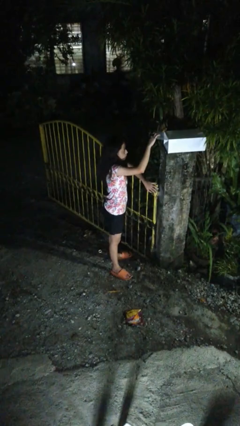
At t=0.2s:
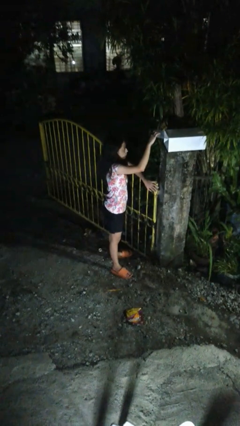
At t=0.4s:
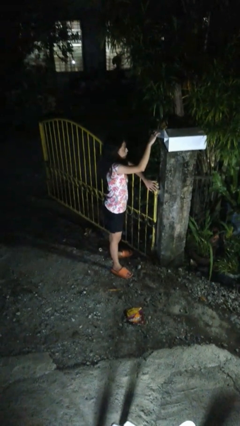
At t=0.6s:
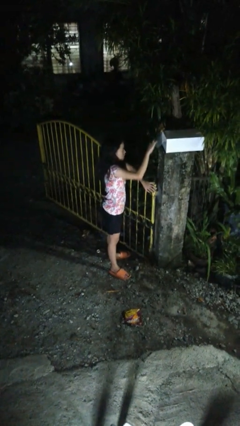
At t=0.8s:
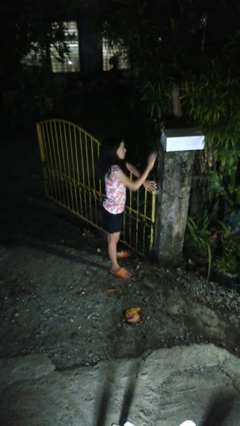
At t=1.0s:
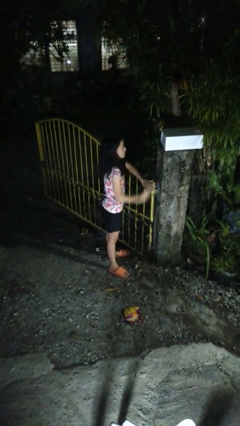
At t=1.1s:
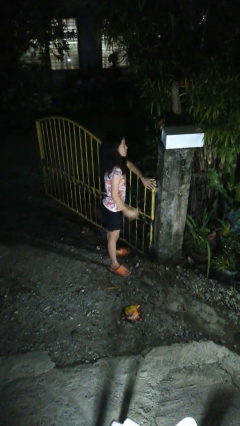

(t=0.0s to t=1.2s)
person closes mailbox

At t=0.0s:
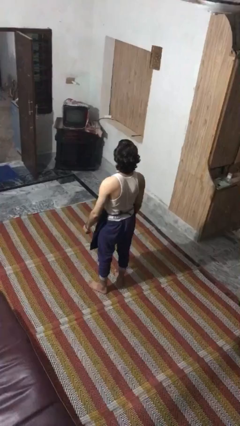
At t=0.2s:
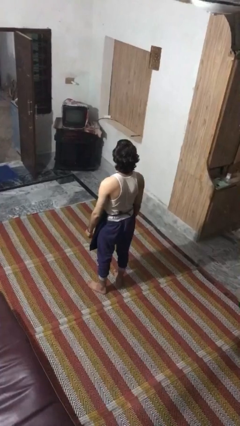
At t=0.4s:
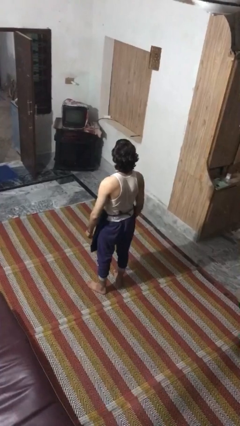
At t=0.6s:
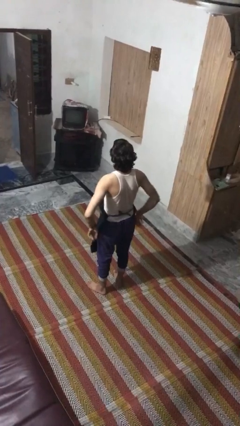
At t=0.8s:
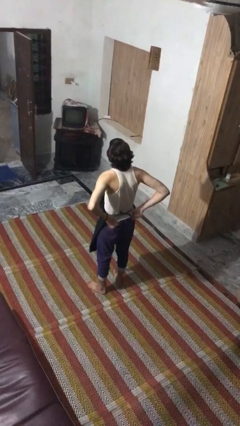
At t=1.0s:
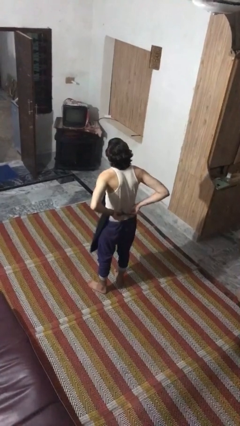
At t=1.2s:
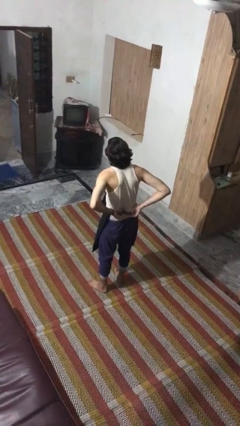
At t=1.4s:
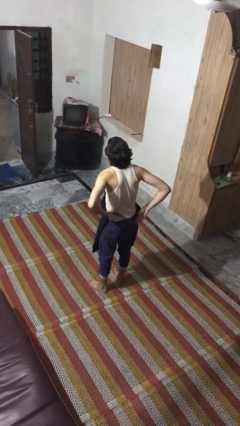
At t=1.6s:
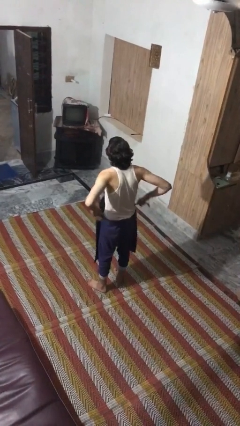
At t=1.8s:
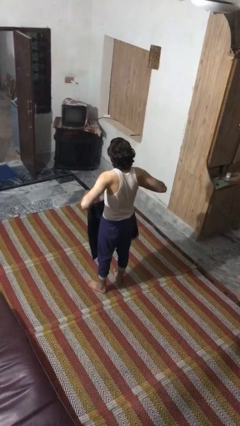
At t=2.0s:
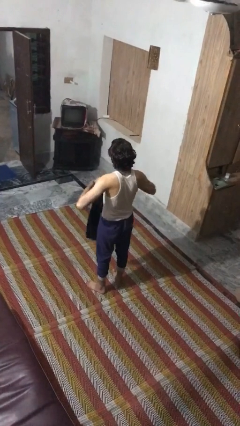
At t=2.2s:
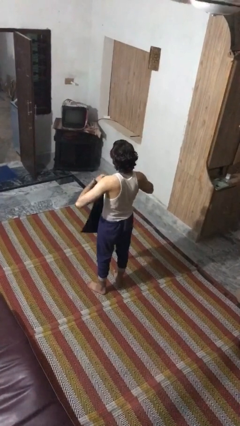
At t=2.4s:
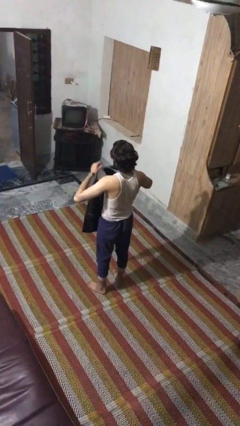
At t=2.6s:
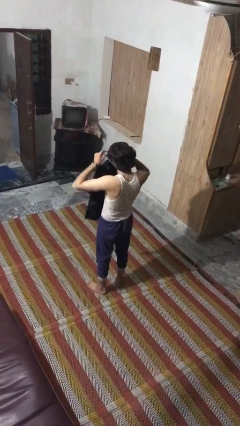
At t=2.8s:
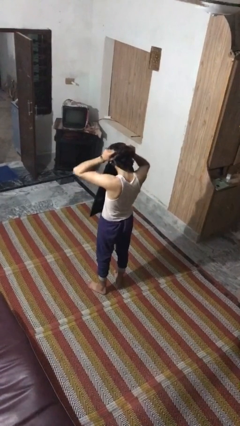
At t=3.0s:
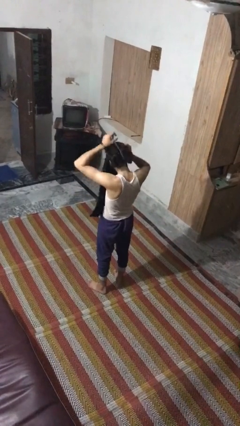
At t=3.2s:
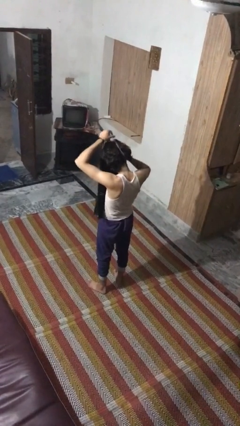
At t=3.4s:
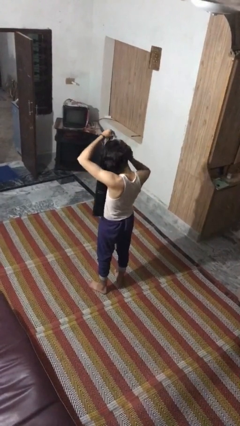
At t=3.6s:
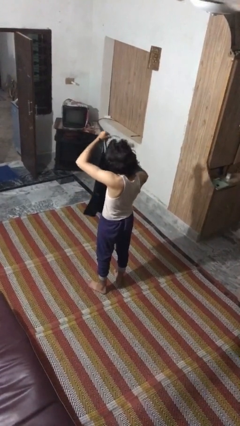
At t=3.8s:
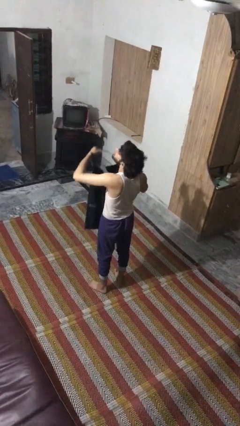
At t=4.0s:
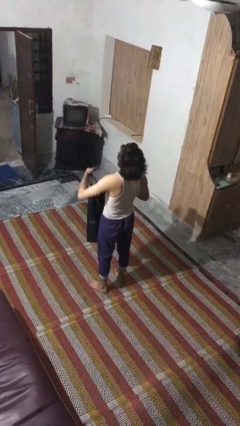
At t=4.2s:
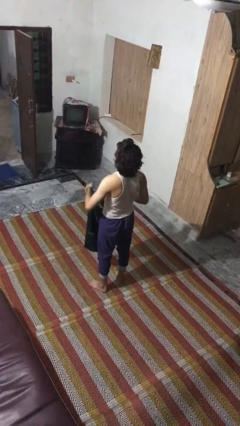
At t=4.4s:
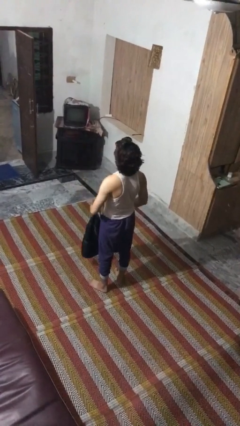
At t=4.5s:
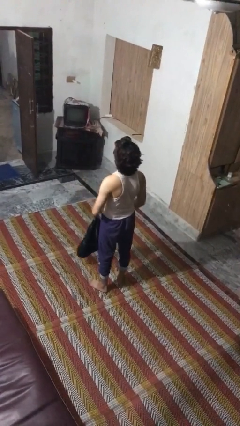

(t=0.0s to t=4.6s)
person takes off apron

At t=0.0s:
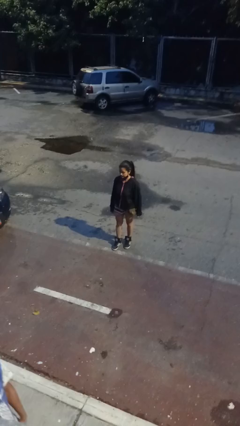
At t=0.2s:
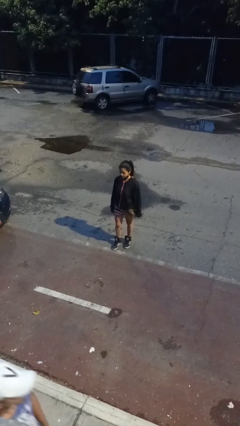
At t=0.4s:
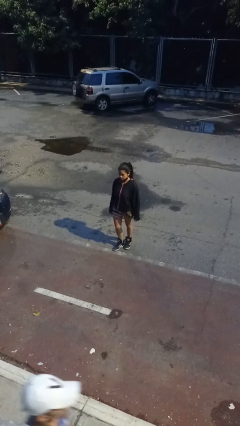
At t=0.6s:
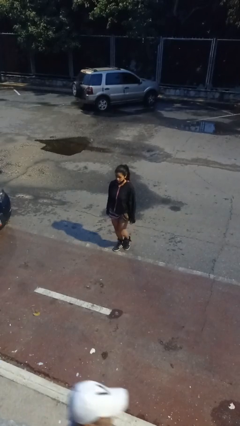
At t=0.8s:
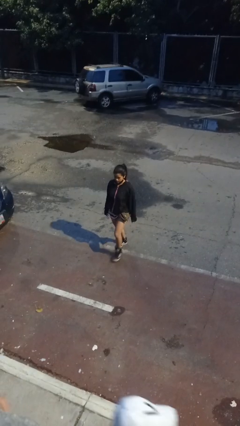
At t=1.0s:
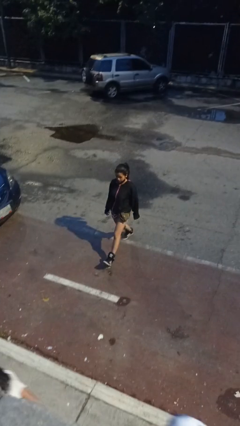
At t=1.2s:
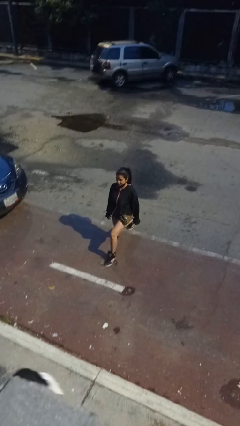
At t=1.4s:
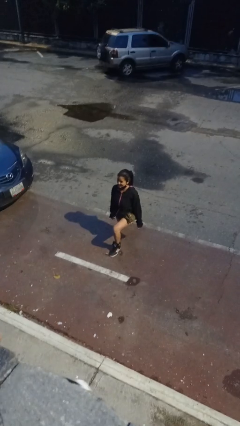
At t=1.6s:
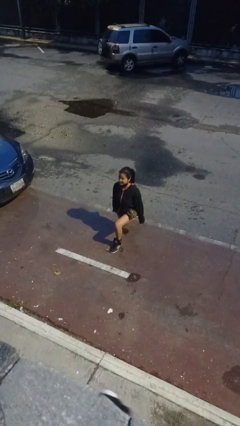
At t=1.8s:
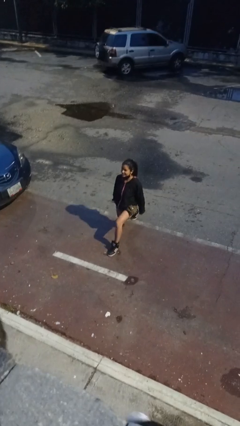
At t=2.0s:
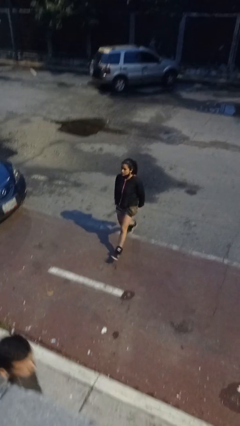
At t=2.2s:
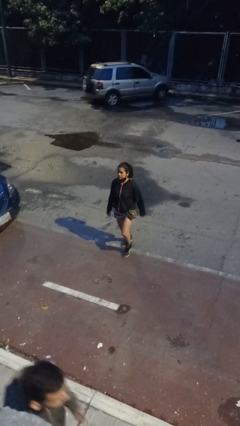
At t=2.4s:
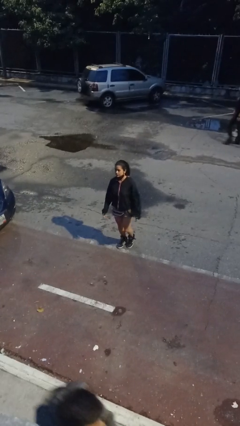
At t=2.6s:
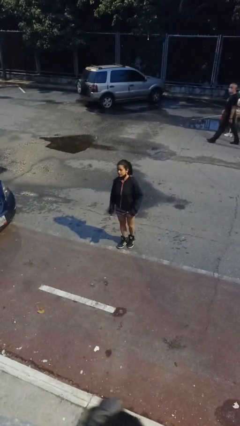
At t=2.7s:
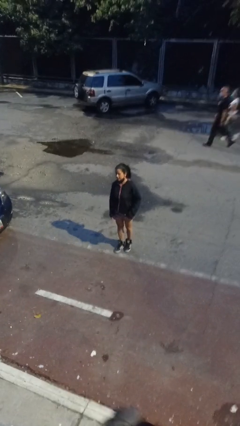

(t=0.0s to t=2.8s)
person exercises with lunges

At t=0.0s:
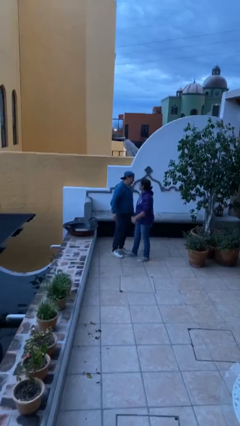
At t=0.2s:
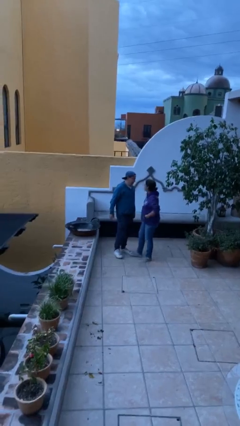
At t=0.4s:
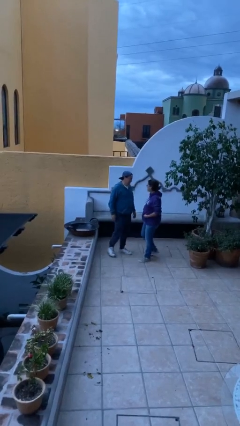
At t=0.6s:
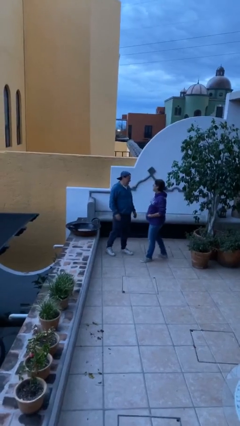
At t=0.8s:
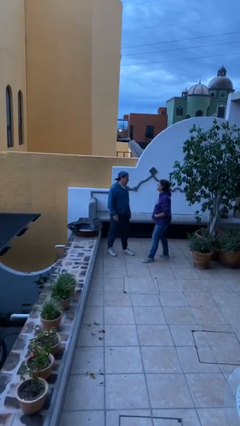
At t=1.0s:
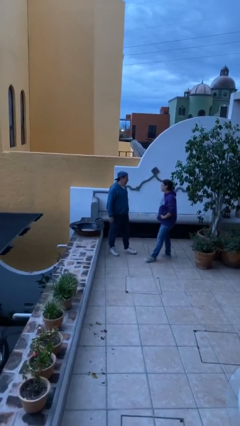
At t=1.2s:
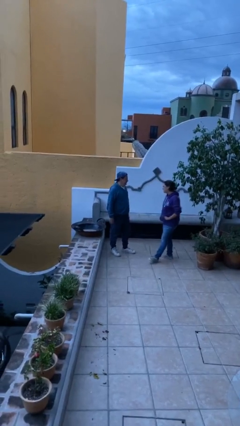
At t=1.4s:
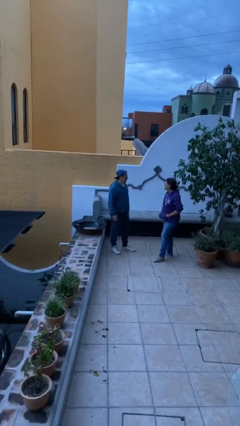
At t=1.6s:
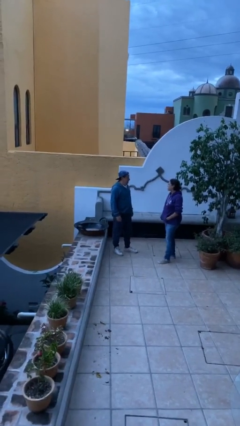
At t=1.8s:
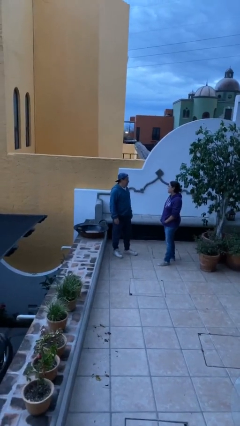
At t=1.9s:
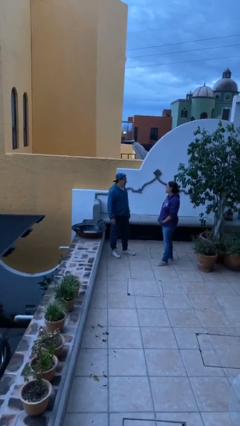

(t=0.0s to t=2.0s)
person talks to person

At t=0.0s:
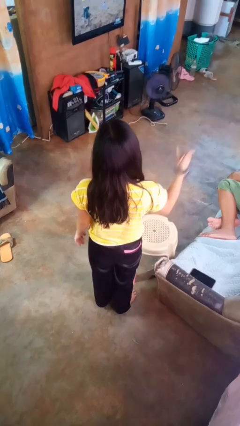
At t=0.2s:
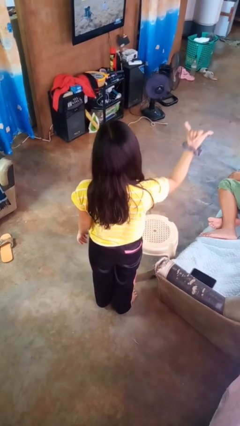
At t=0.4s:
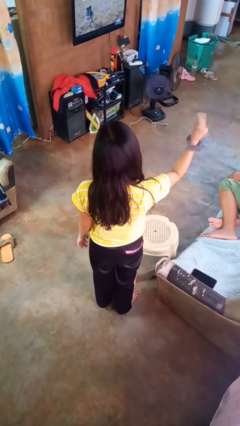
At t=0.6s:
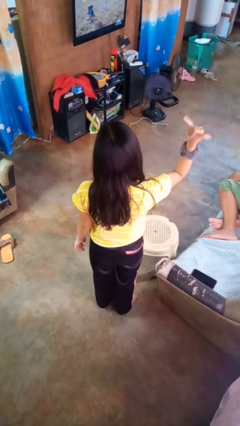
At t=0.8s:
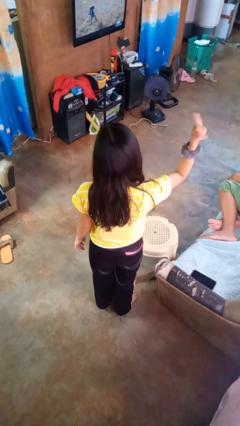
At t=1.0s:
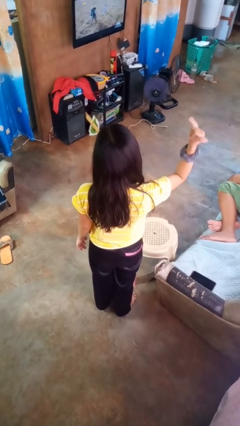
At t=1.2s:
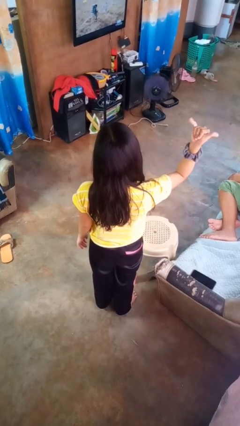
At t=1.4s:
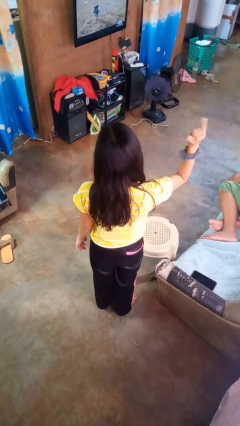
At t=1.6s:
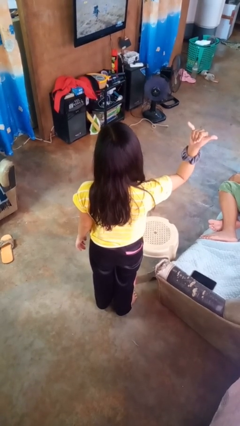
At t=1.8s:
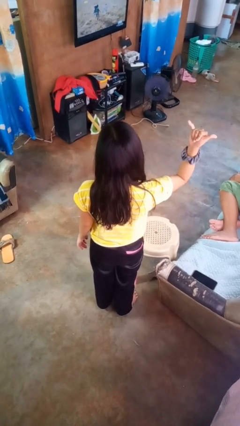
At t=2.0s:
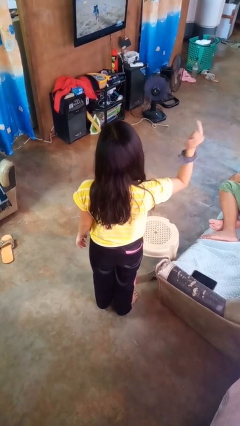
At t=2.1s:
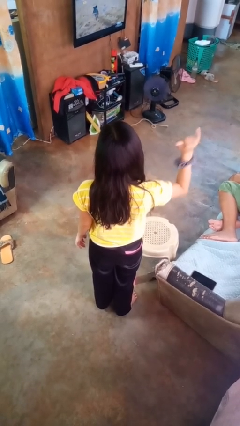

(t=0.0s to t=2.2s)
person gestures hang loose

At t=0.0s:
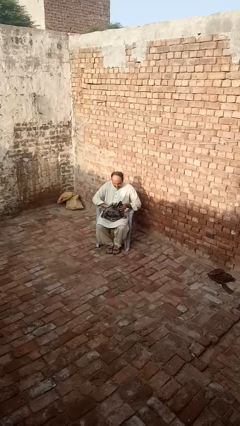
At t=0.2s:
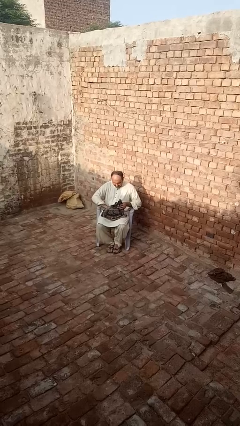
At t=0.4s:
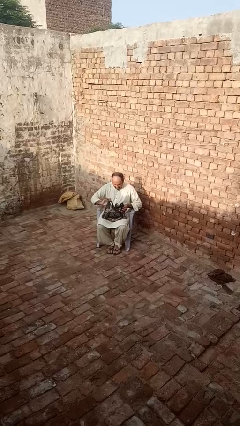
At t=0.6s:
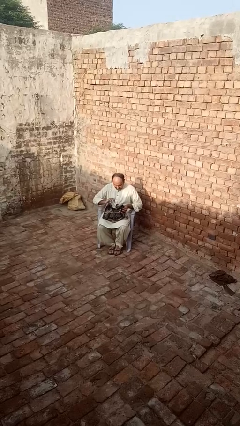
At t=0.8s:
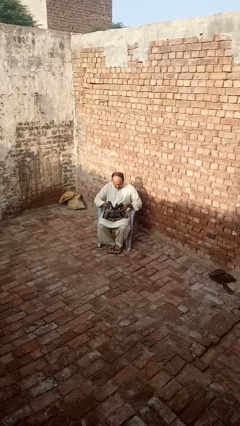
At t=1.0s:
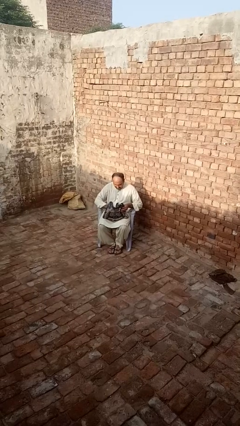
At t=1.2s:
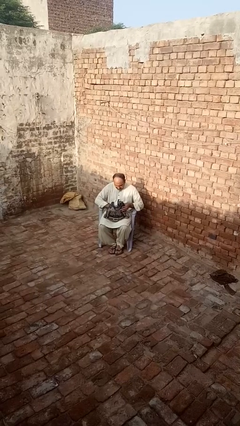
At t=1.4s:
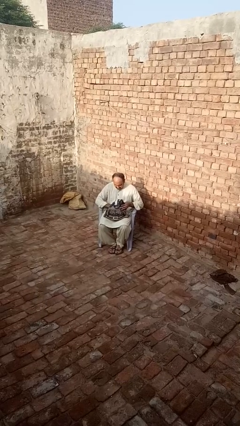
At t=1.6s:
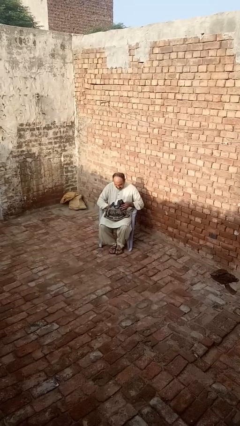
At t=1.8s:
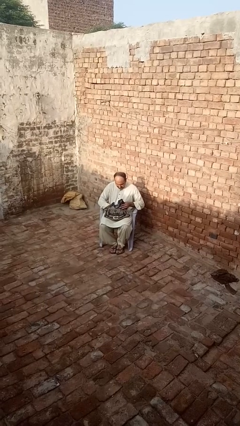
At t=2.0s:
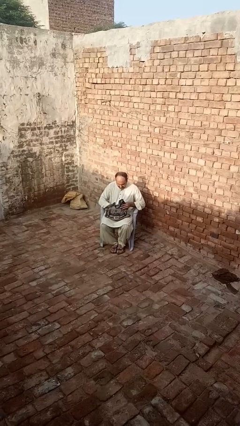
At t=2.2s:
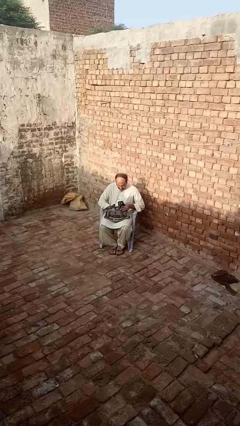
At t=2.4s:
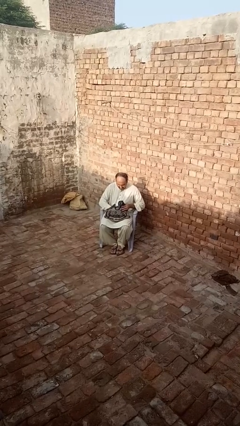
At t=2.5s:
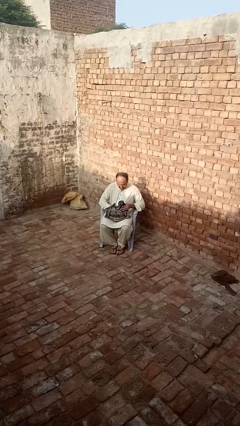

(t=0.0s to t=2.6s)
person searches in purse

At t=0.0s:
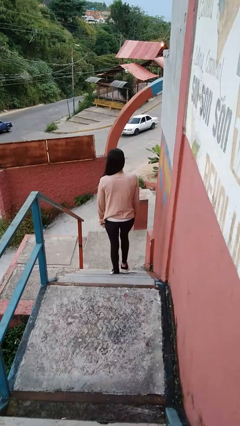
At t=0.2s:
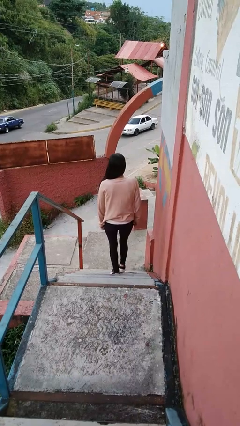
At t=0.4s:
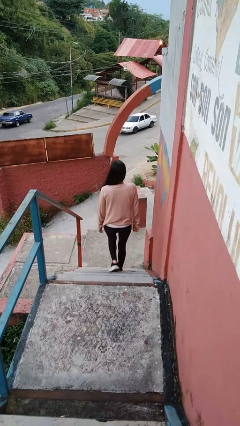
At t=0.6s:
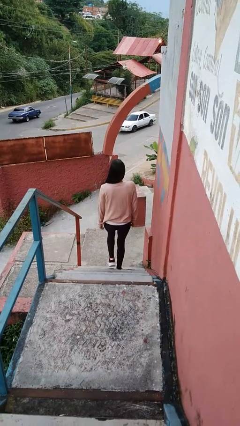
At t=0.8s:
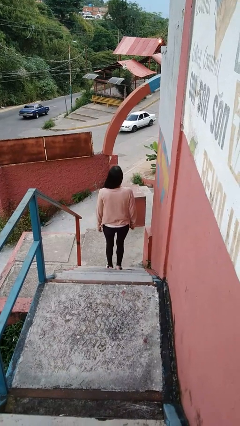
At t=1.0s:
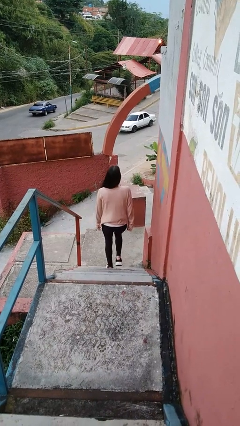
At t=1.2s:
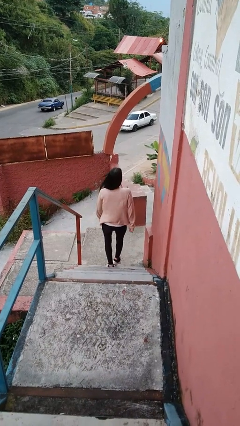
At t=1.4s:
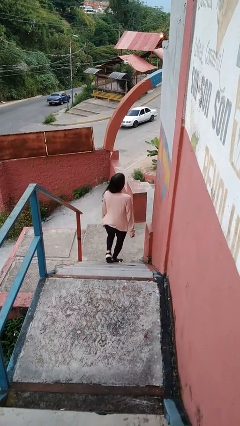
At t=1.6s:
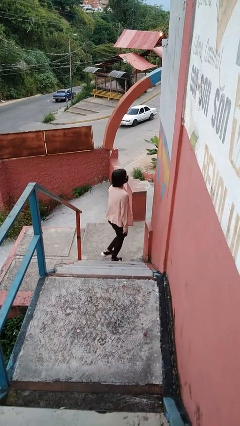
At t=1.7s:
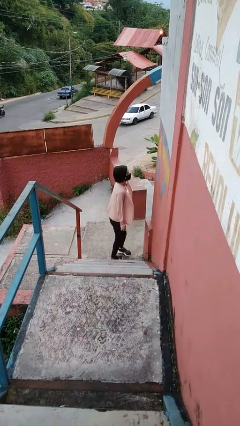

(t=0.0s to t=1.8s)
person climbs down stairs
